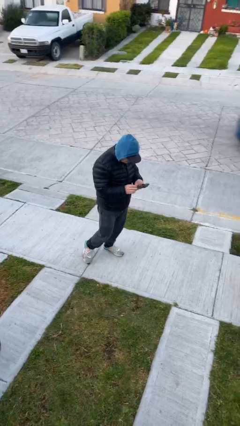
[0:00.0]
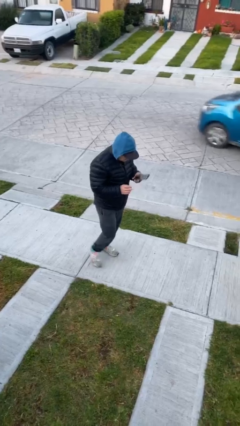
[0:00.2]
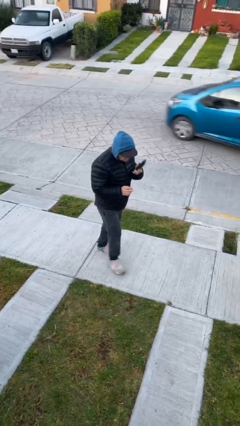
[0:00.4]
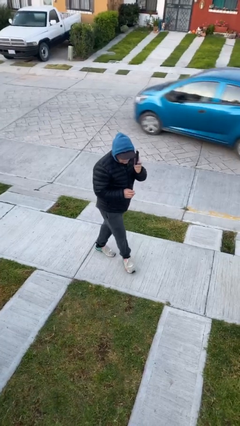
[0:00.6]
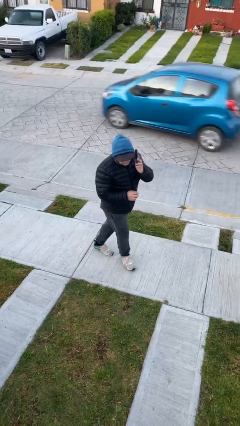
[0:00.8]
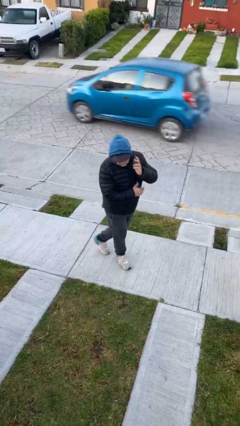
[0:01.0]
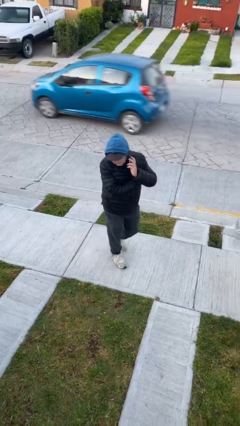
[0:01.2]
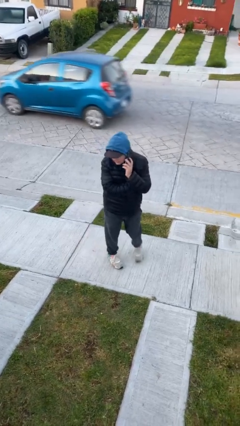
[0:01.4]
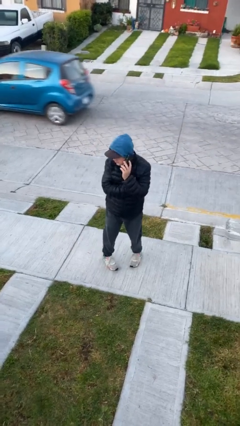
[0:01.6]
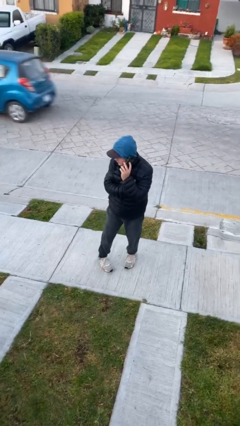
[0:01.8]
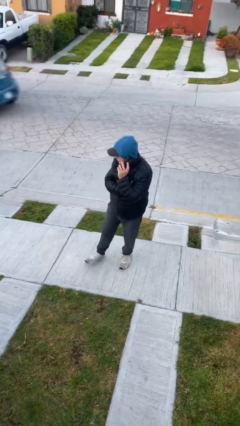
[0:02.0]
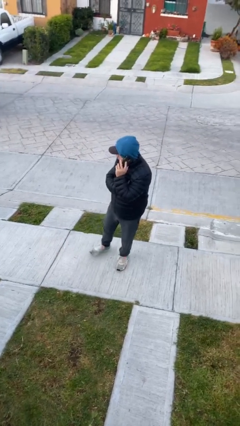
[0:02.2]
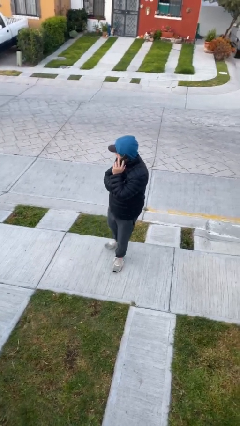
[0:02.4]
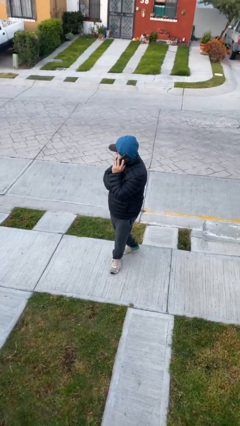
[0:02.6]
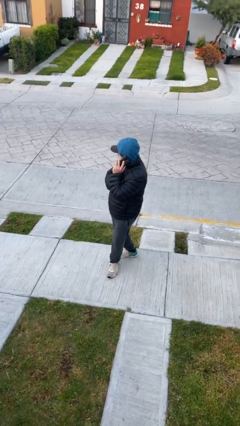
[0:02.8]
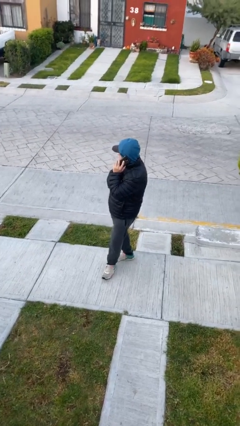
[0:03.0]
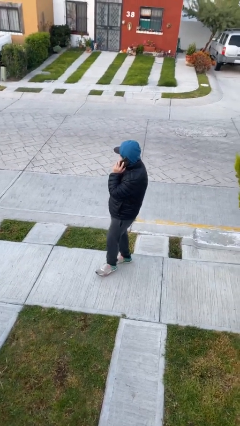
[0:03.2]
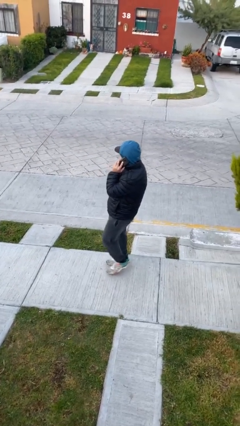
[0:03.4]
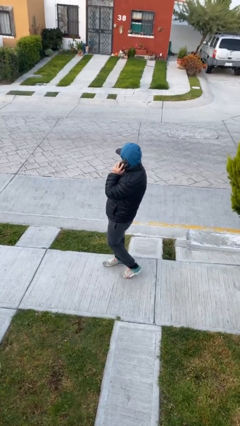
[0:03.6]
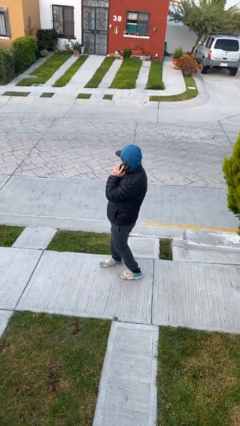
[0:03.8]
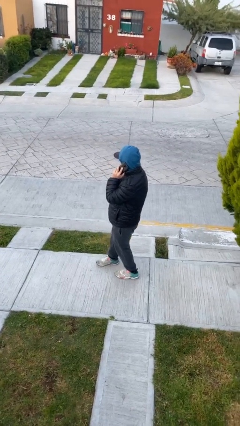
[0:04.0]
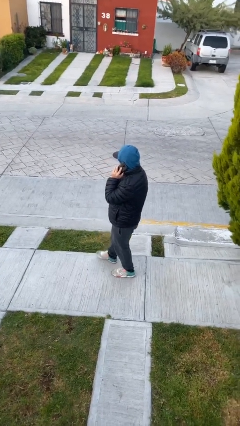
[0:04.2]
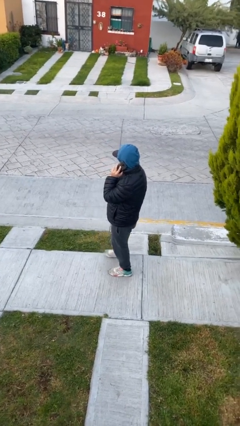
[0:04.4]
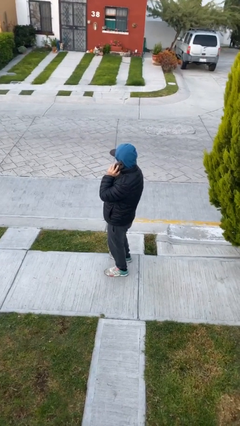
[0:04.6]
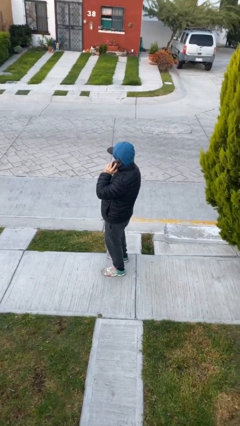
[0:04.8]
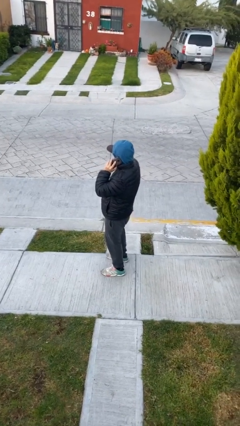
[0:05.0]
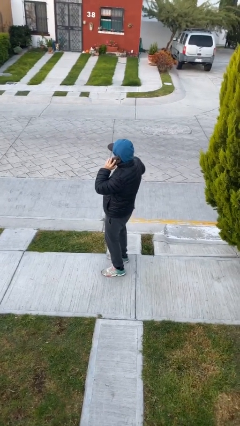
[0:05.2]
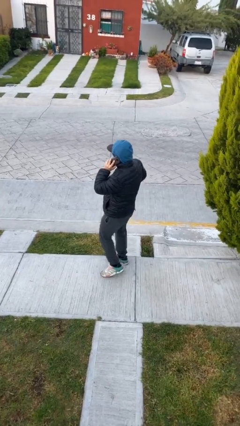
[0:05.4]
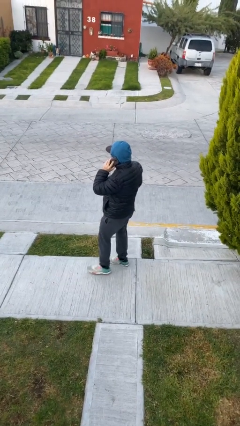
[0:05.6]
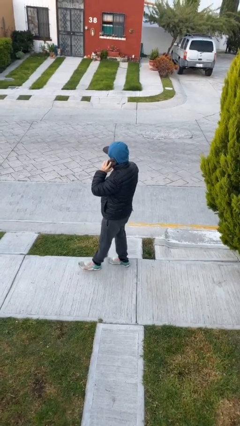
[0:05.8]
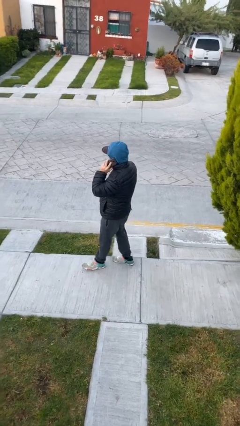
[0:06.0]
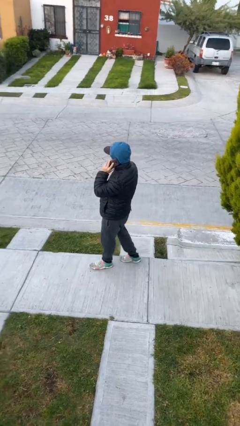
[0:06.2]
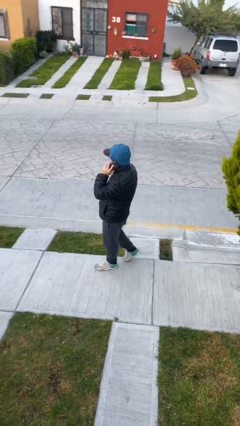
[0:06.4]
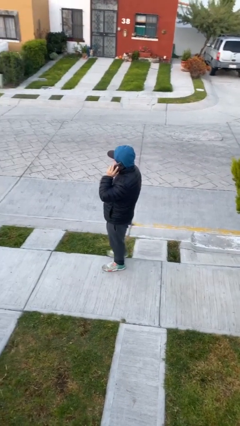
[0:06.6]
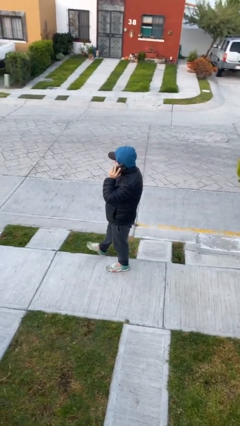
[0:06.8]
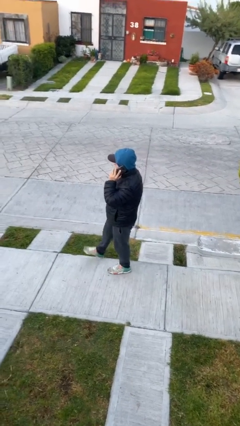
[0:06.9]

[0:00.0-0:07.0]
person talks on phone

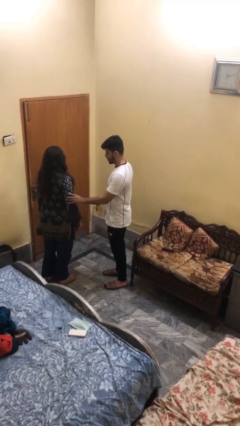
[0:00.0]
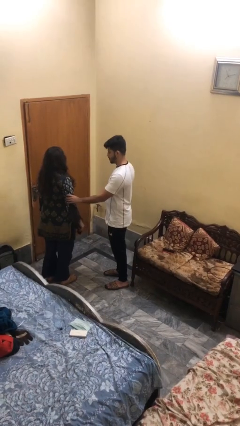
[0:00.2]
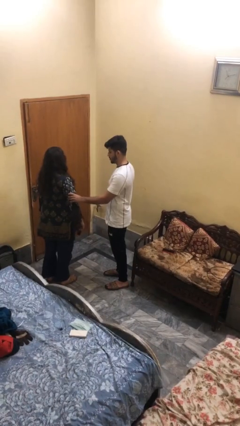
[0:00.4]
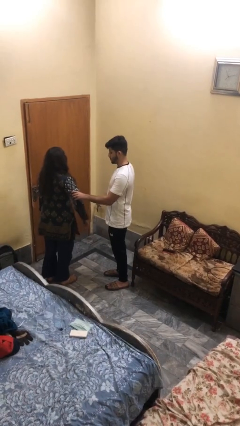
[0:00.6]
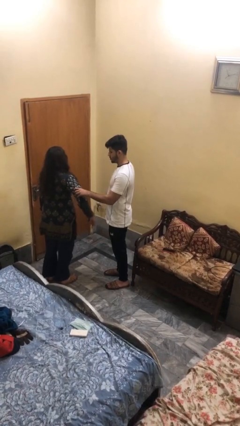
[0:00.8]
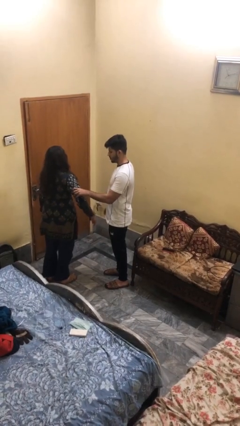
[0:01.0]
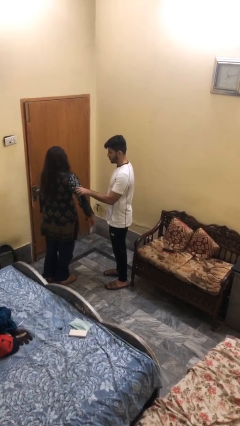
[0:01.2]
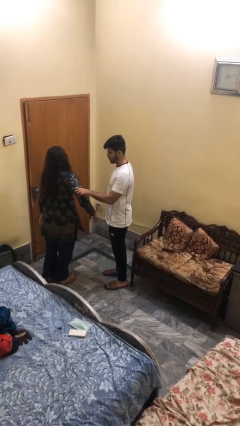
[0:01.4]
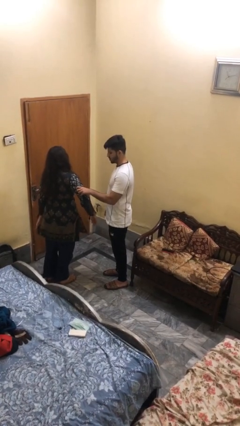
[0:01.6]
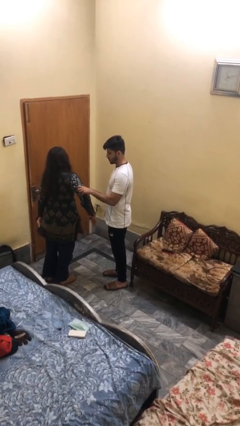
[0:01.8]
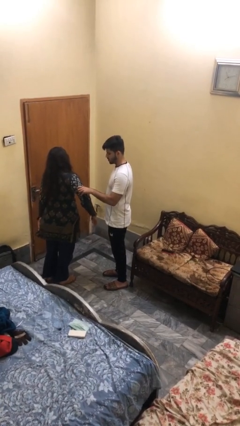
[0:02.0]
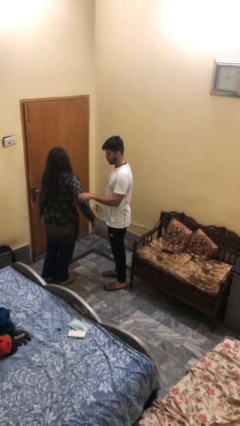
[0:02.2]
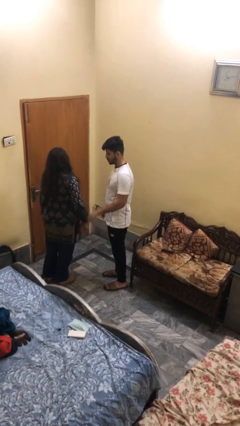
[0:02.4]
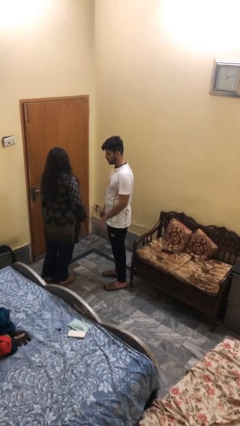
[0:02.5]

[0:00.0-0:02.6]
person grabs person by bicep

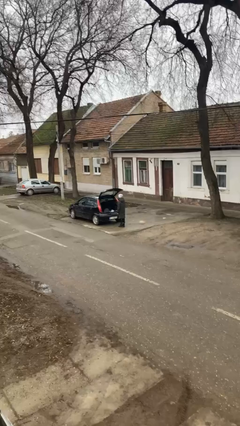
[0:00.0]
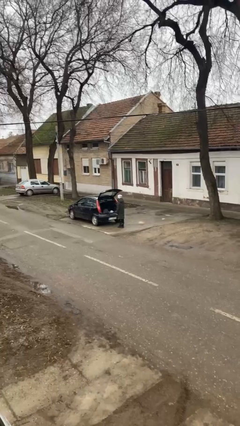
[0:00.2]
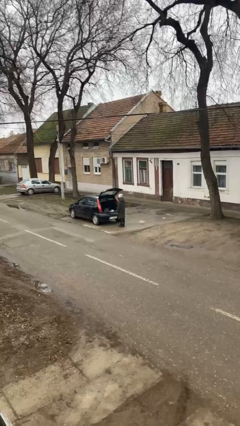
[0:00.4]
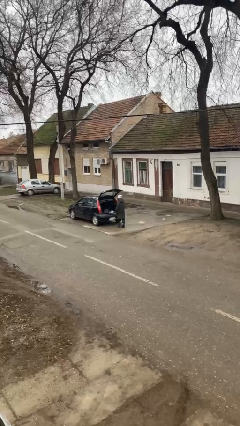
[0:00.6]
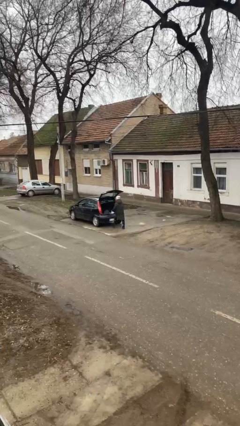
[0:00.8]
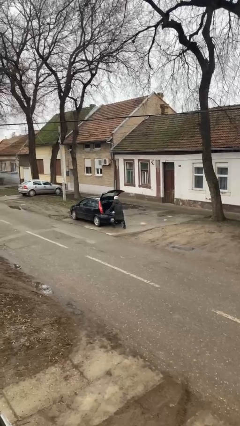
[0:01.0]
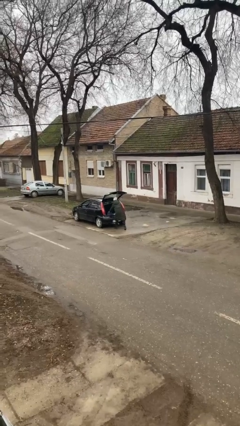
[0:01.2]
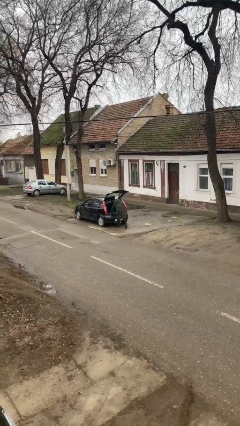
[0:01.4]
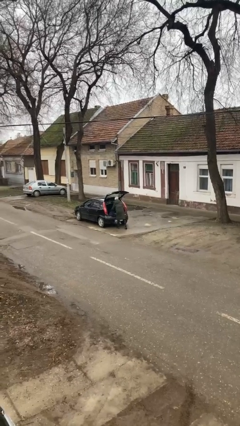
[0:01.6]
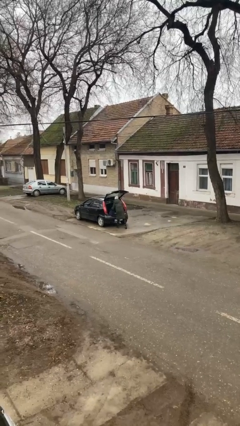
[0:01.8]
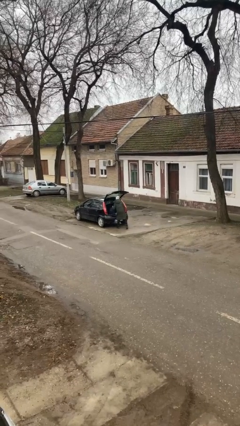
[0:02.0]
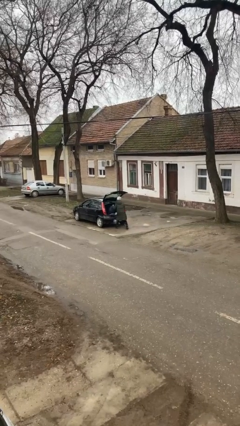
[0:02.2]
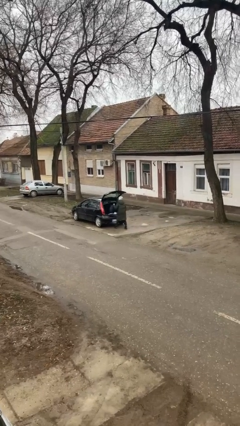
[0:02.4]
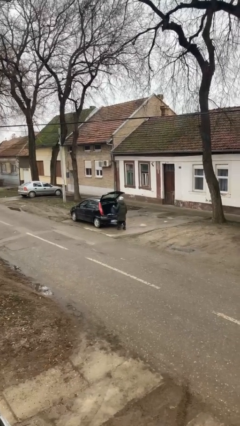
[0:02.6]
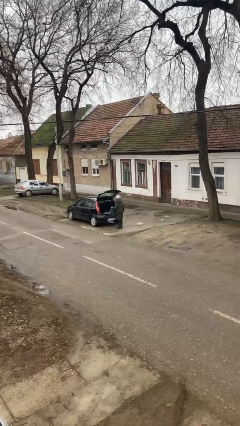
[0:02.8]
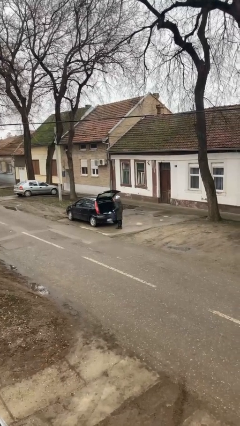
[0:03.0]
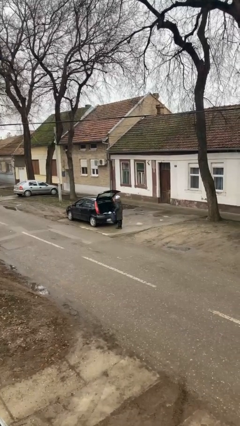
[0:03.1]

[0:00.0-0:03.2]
person unloads car

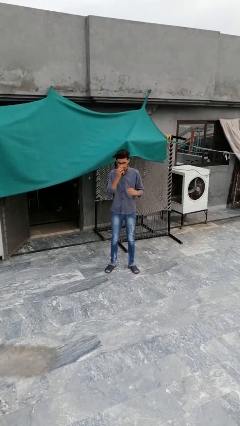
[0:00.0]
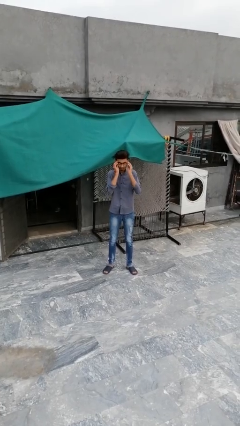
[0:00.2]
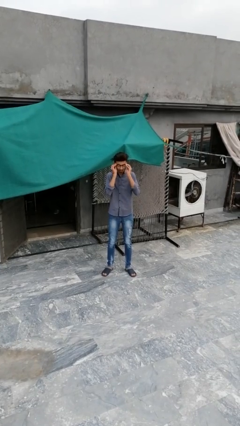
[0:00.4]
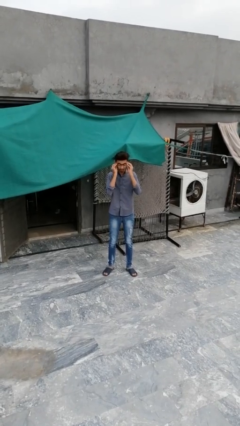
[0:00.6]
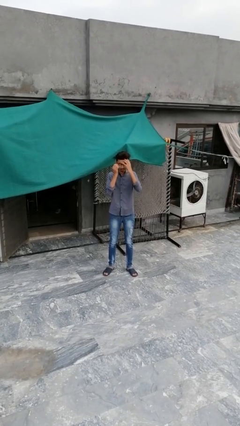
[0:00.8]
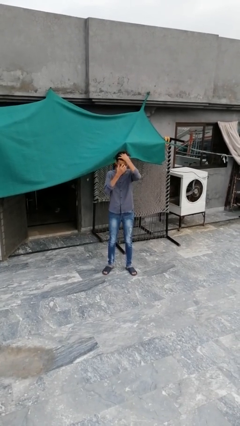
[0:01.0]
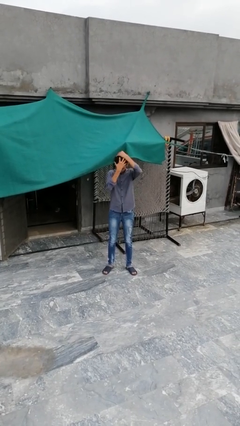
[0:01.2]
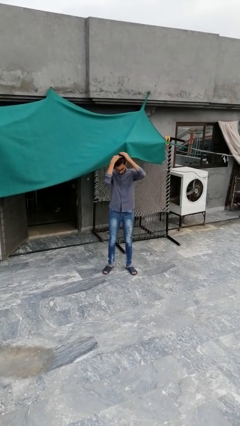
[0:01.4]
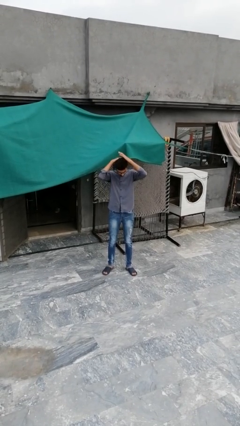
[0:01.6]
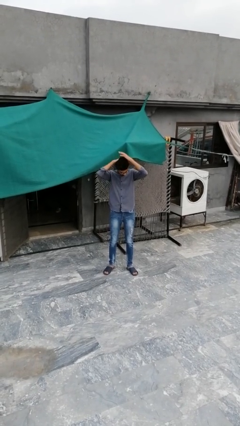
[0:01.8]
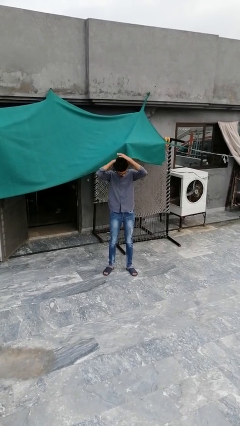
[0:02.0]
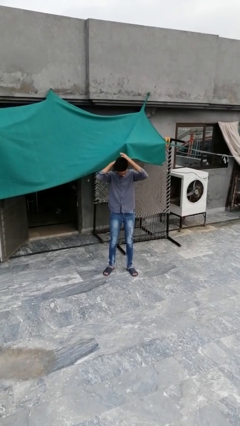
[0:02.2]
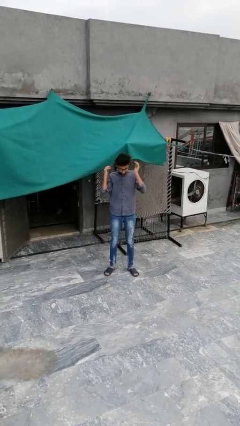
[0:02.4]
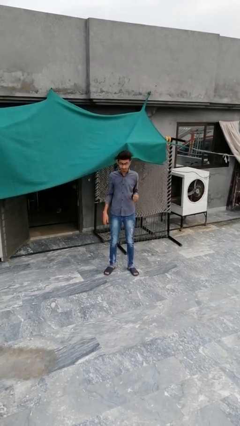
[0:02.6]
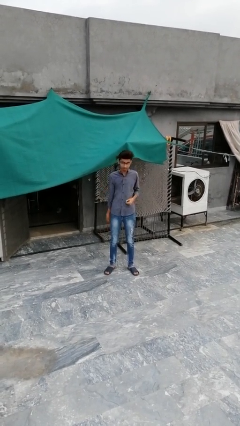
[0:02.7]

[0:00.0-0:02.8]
person strokes hair

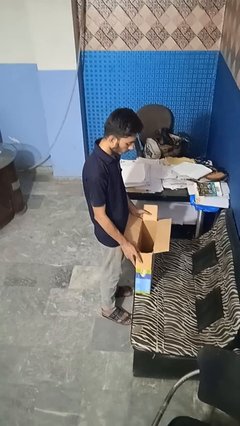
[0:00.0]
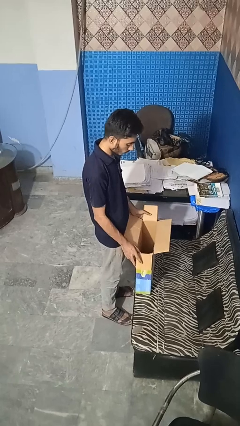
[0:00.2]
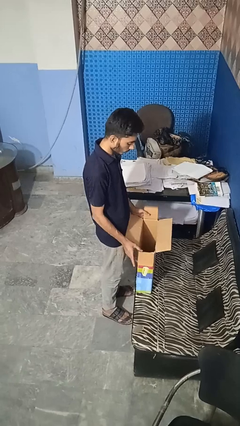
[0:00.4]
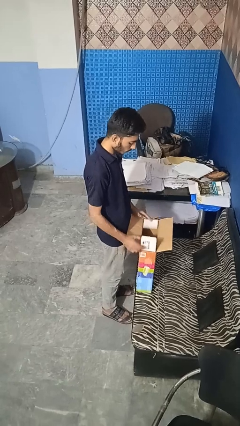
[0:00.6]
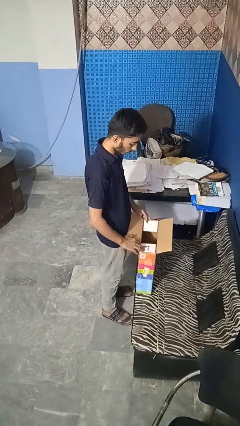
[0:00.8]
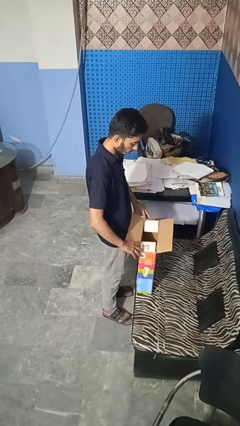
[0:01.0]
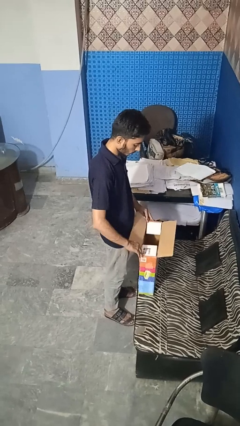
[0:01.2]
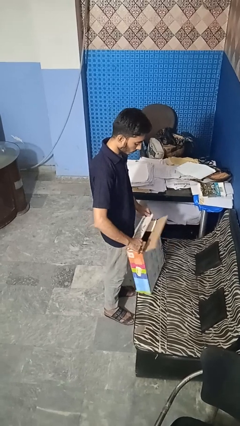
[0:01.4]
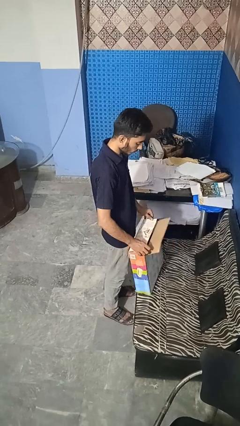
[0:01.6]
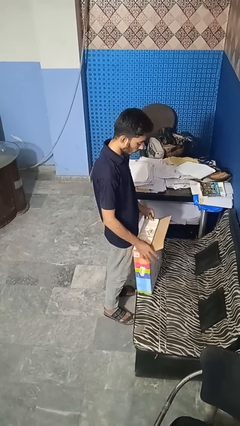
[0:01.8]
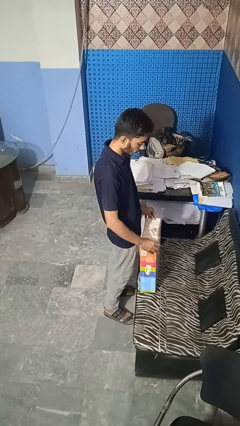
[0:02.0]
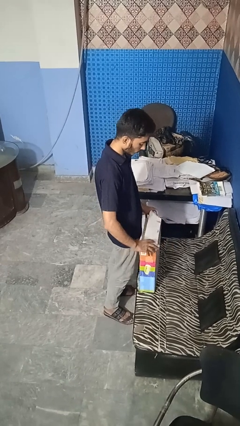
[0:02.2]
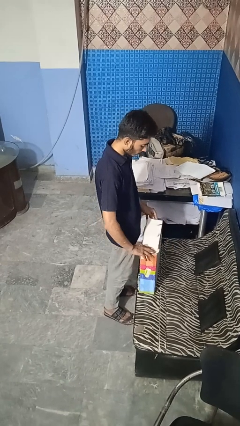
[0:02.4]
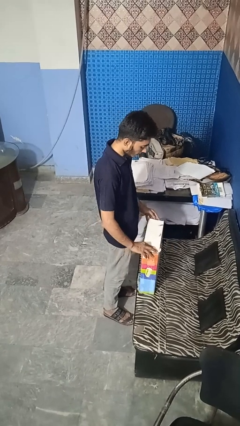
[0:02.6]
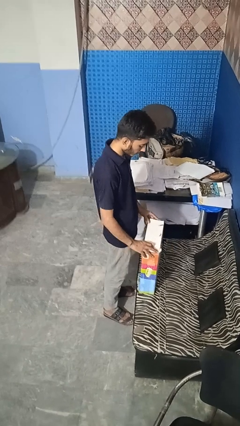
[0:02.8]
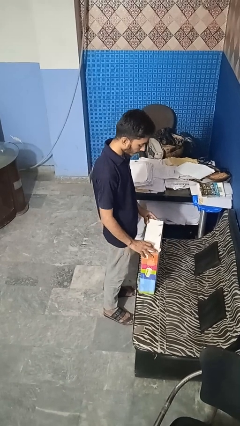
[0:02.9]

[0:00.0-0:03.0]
person closes box
